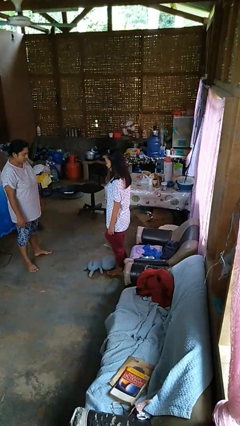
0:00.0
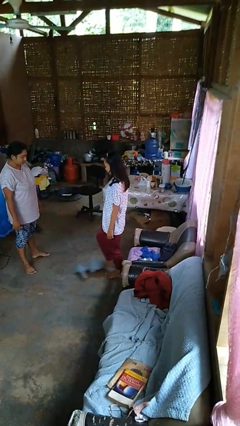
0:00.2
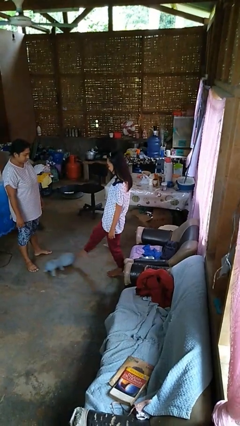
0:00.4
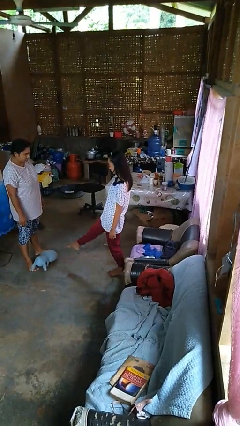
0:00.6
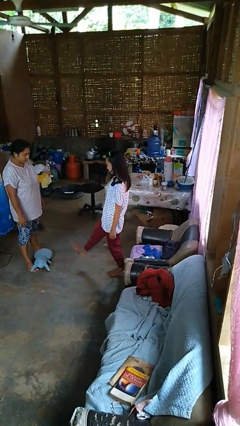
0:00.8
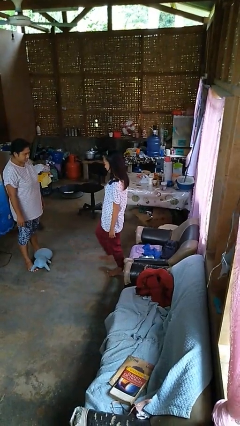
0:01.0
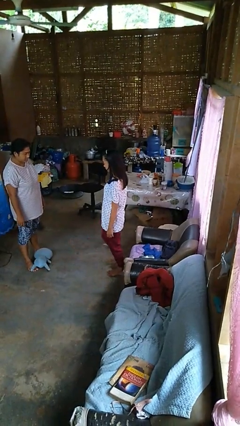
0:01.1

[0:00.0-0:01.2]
person kicks object to person

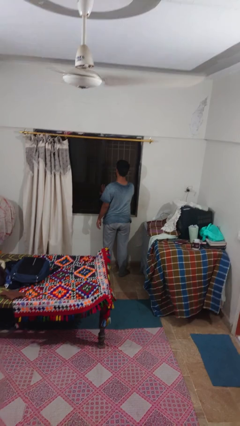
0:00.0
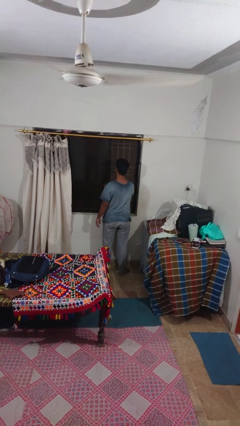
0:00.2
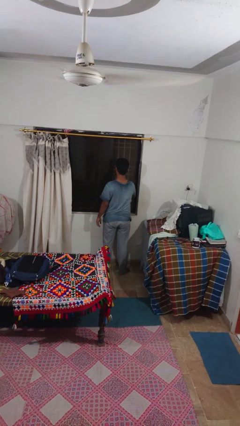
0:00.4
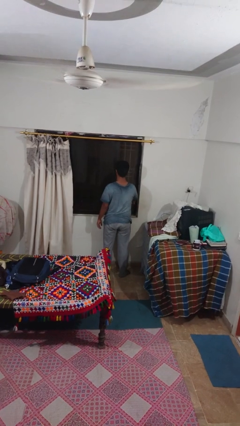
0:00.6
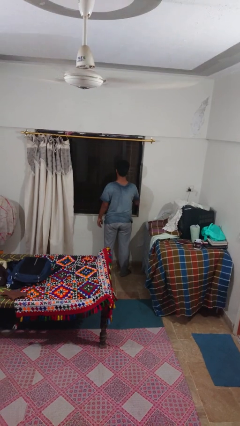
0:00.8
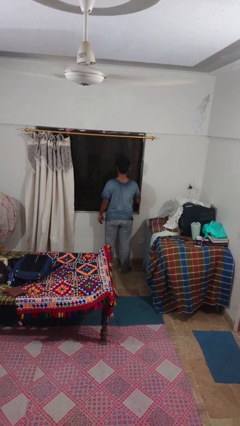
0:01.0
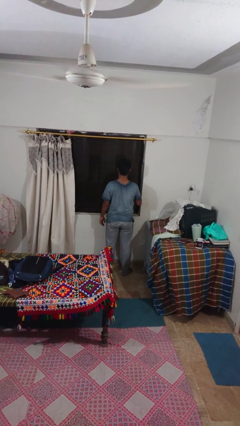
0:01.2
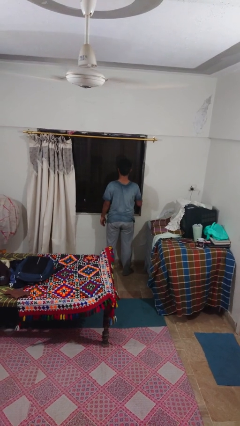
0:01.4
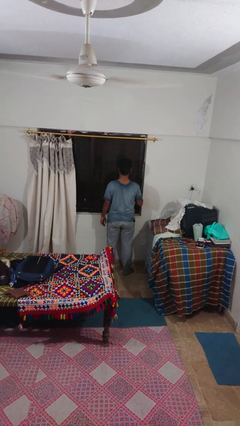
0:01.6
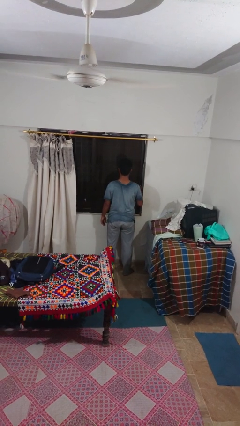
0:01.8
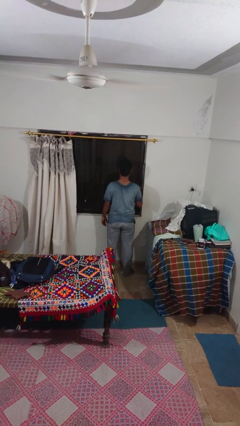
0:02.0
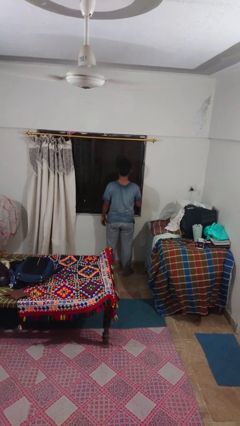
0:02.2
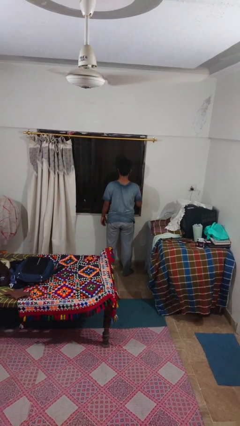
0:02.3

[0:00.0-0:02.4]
person closes sliding door

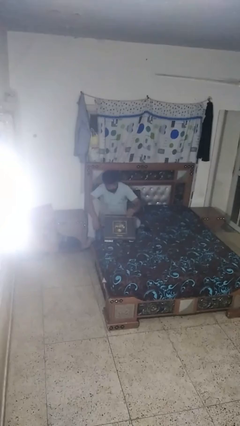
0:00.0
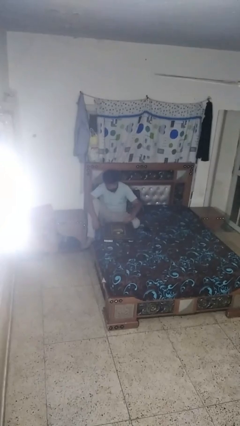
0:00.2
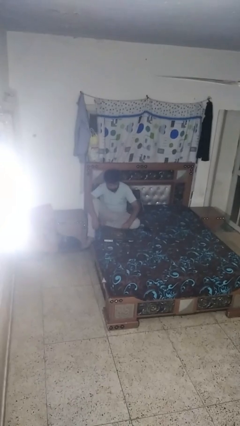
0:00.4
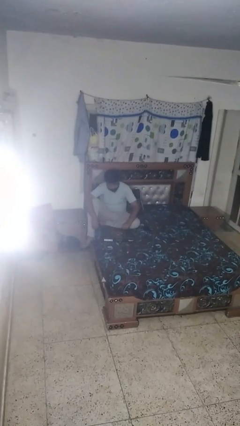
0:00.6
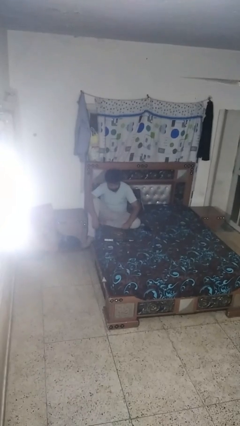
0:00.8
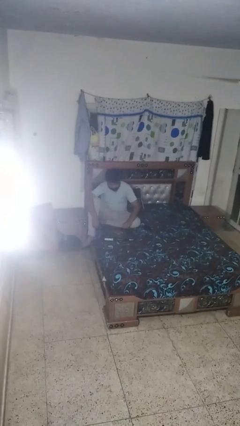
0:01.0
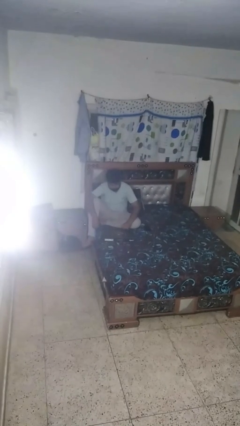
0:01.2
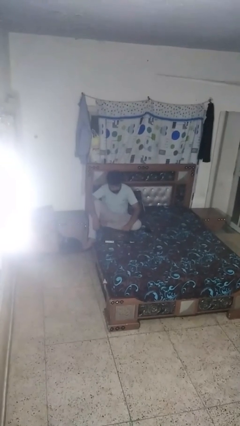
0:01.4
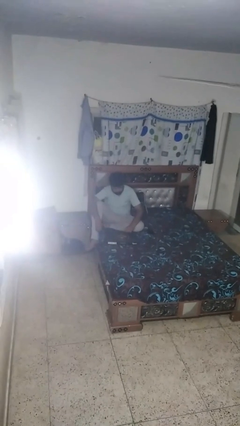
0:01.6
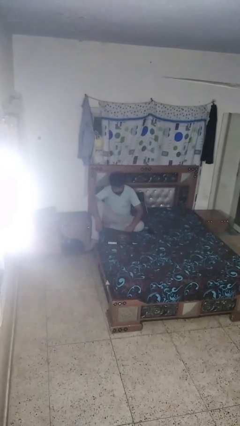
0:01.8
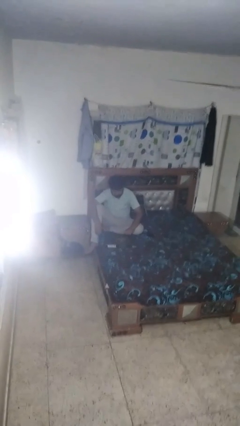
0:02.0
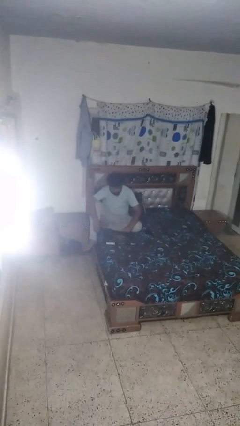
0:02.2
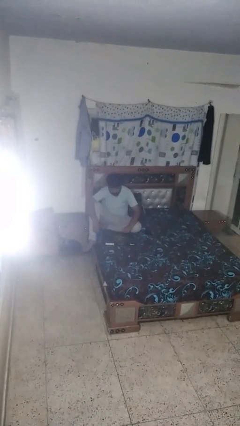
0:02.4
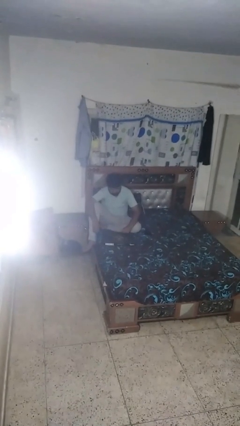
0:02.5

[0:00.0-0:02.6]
person closes laptop

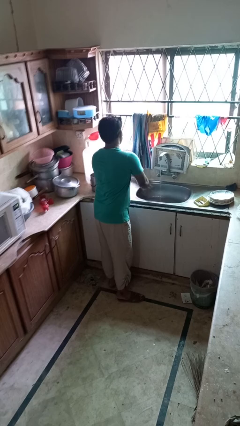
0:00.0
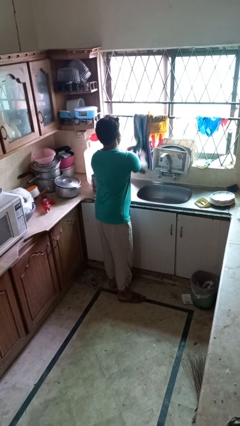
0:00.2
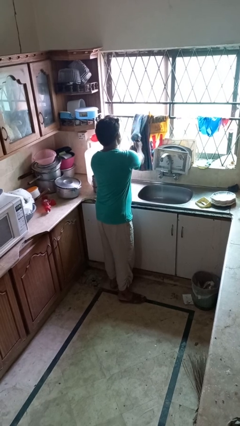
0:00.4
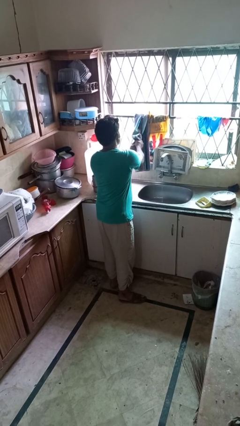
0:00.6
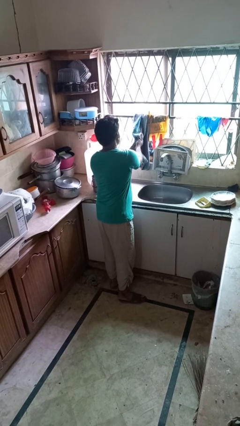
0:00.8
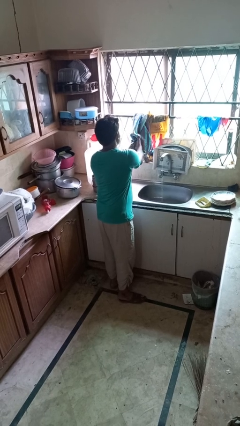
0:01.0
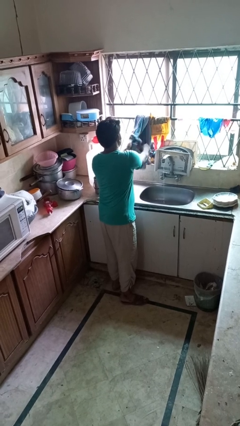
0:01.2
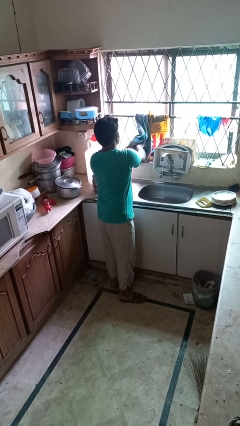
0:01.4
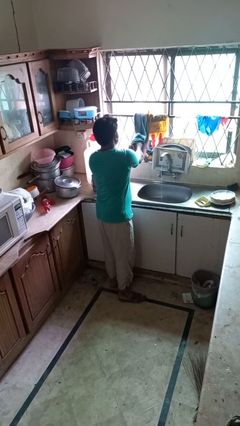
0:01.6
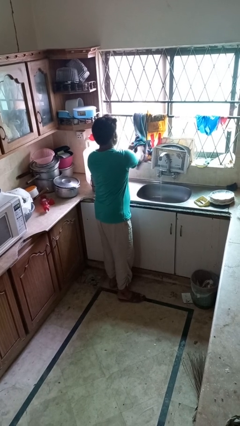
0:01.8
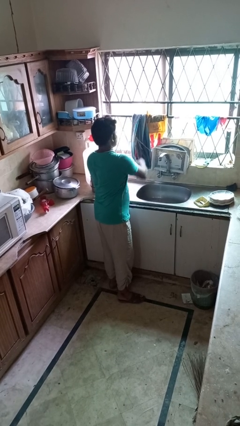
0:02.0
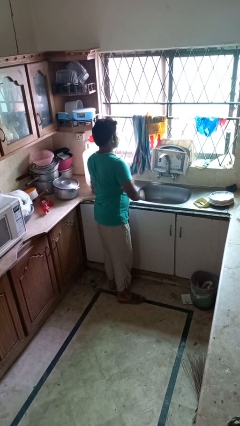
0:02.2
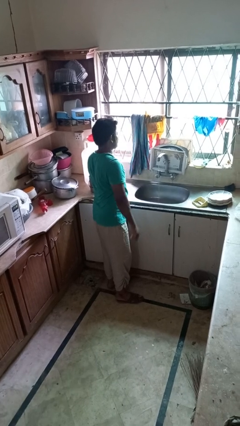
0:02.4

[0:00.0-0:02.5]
person dries hands with towel

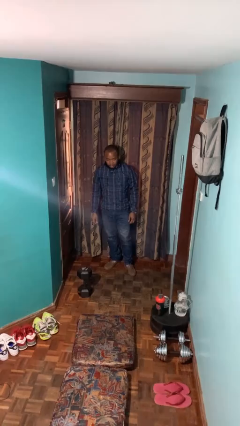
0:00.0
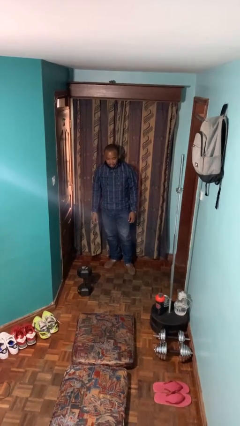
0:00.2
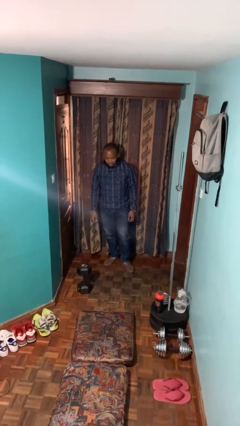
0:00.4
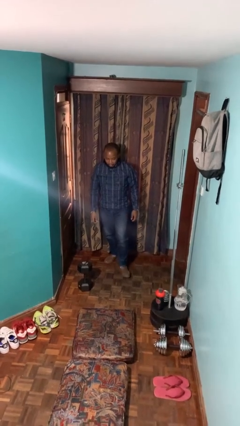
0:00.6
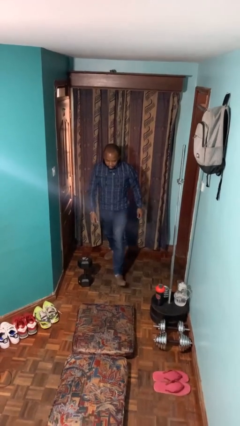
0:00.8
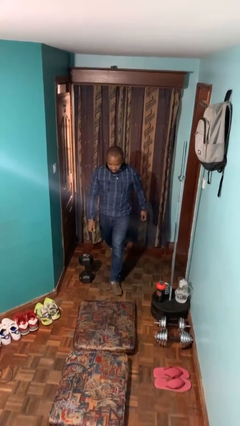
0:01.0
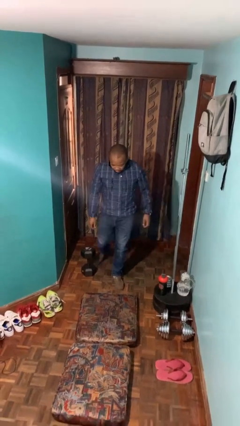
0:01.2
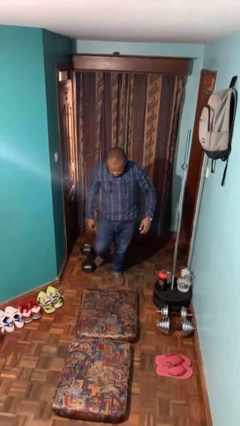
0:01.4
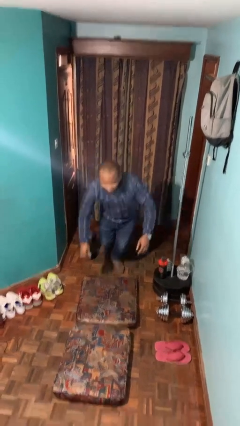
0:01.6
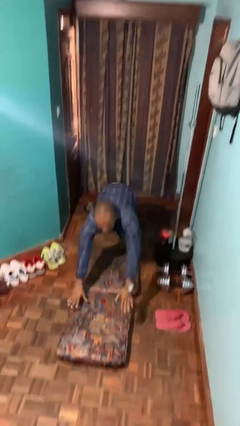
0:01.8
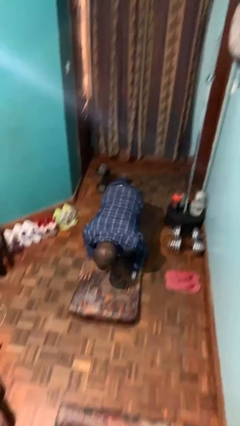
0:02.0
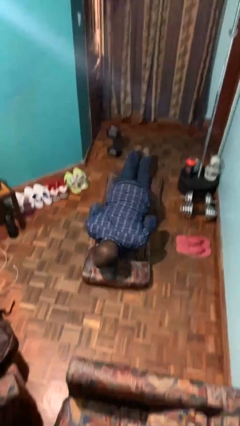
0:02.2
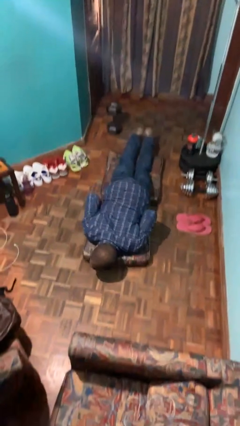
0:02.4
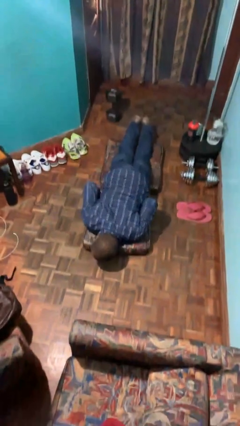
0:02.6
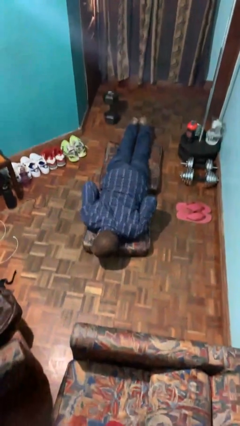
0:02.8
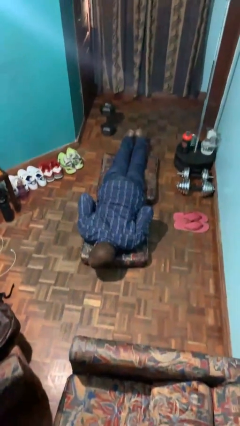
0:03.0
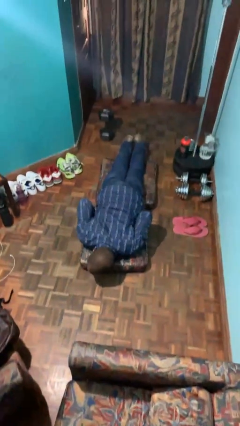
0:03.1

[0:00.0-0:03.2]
person trips on object on floor

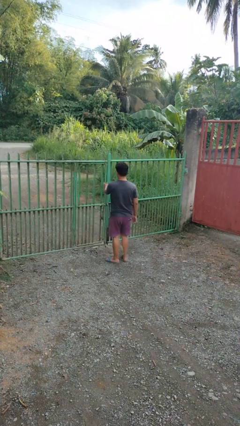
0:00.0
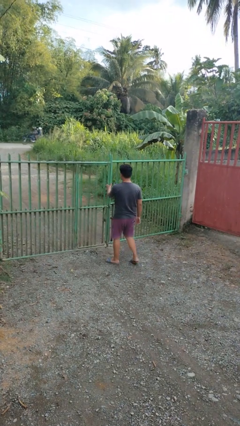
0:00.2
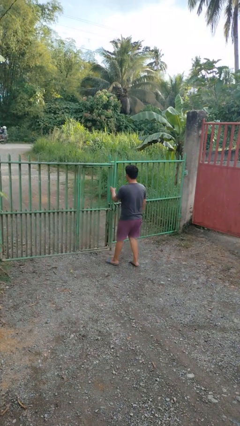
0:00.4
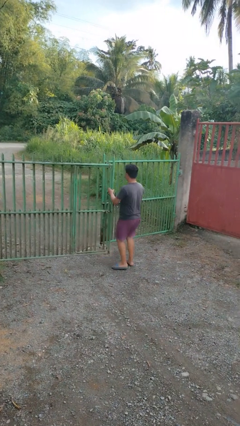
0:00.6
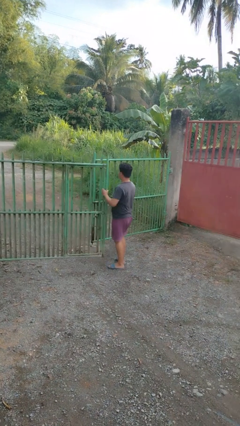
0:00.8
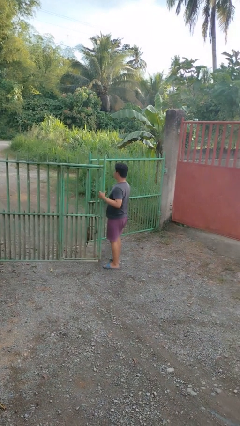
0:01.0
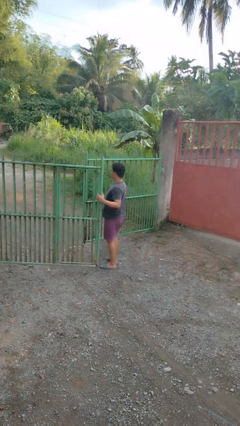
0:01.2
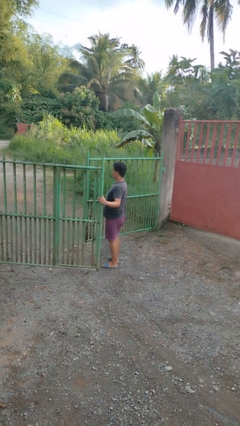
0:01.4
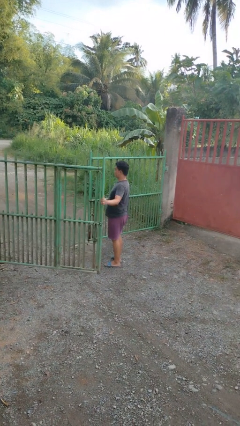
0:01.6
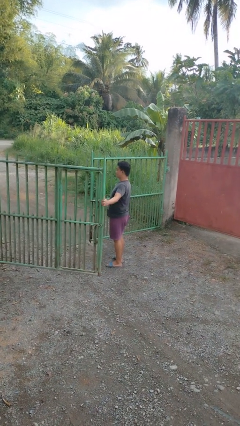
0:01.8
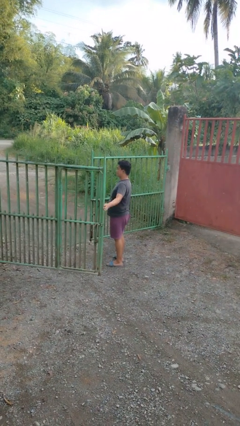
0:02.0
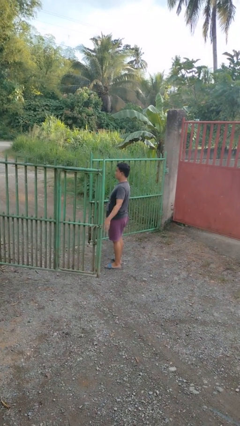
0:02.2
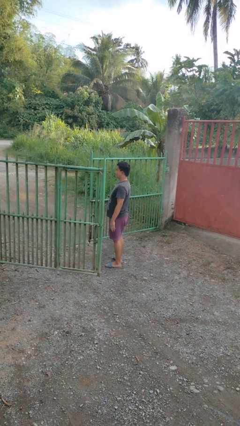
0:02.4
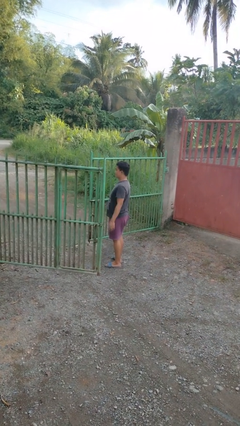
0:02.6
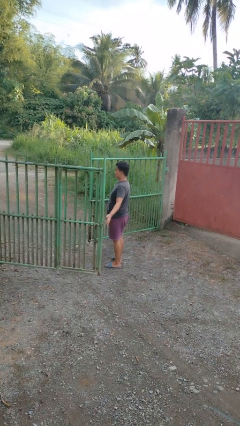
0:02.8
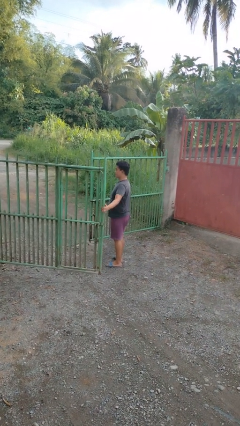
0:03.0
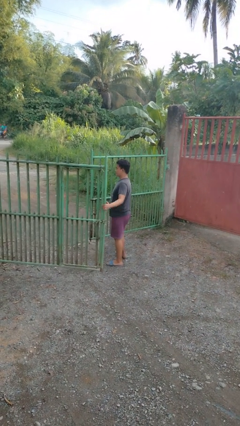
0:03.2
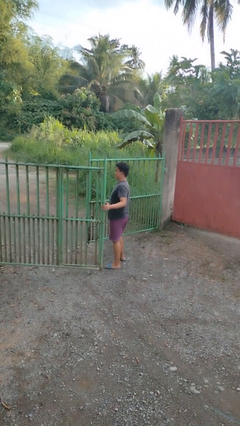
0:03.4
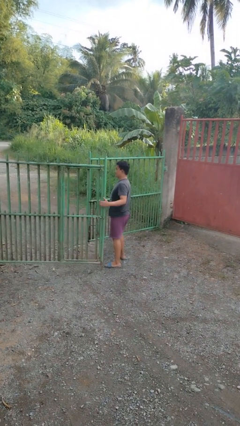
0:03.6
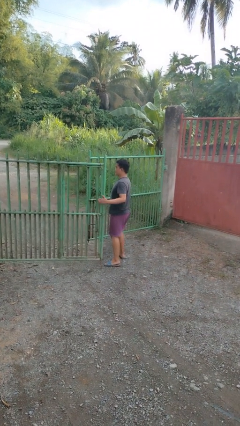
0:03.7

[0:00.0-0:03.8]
person opens gate

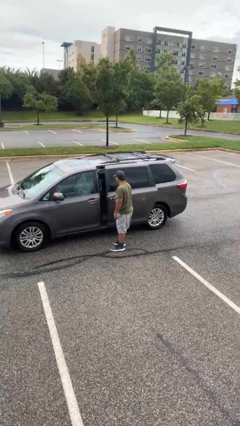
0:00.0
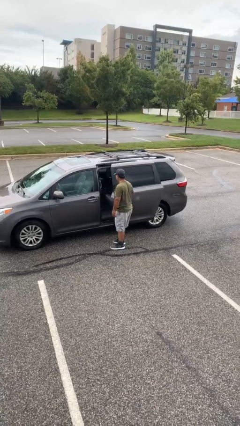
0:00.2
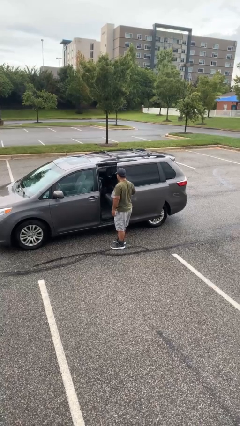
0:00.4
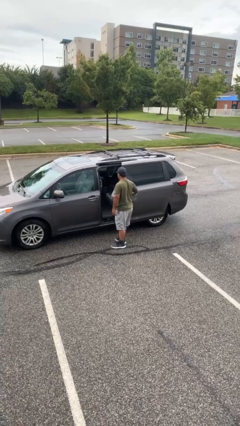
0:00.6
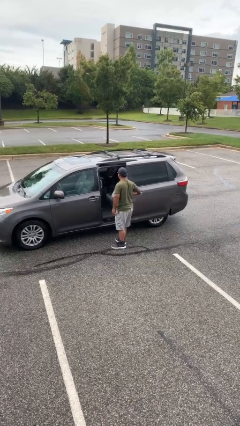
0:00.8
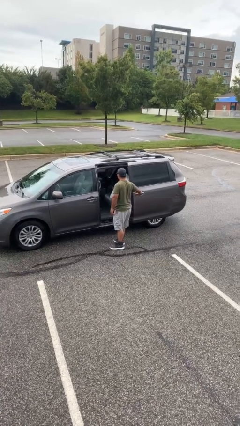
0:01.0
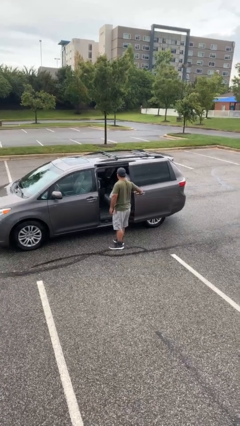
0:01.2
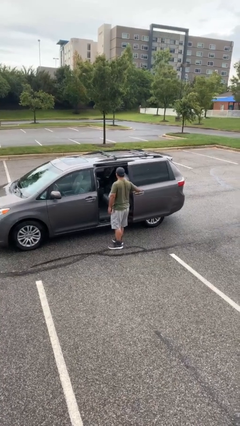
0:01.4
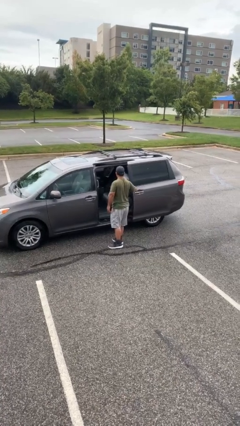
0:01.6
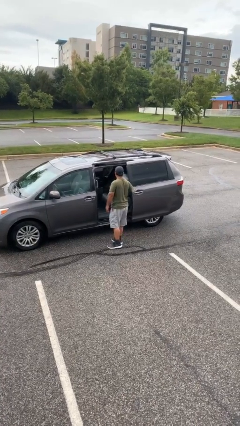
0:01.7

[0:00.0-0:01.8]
person opens car door
